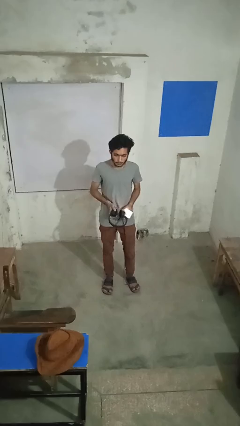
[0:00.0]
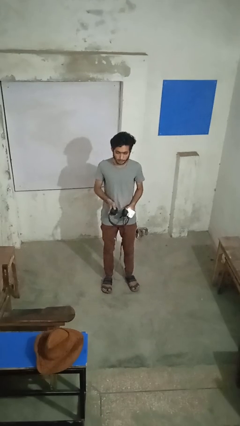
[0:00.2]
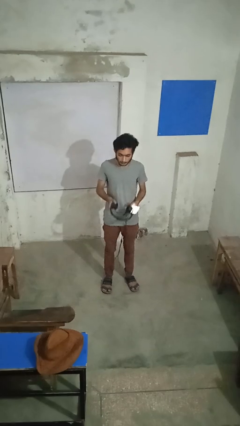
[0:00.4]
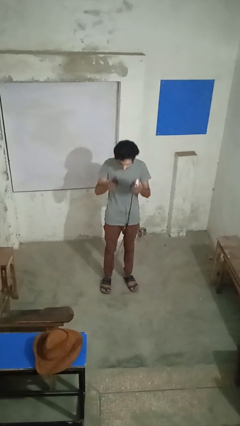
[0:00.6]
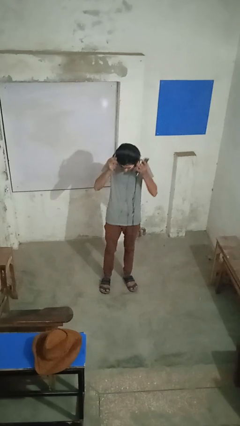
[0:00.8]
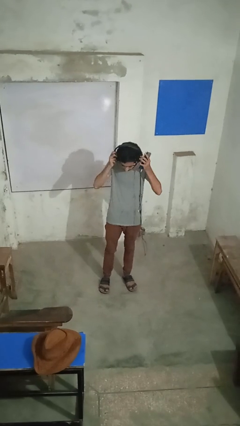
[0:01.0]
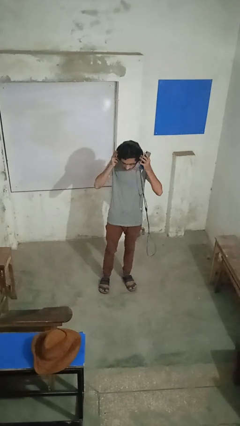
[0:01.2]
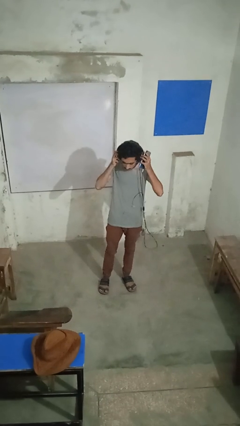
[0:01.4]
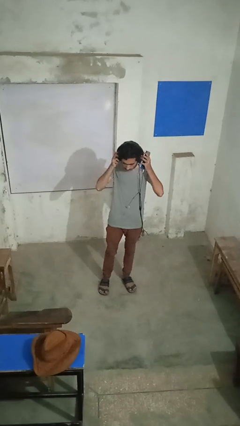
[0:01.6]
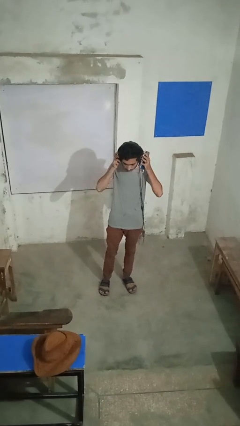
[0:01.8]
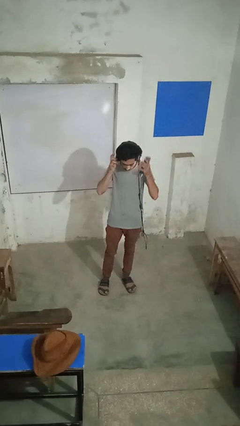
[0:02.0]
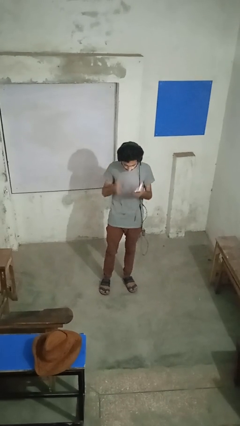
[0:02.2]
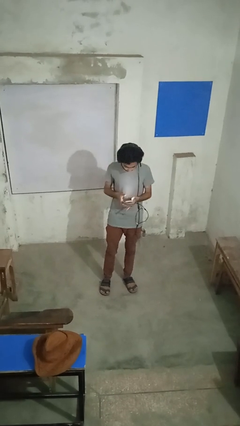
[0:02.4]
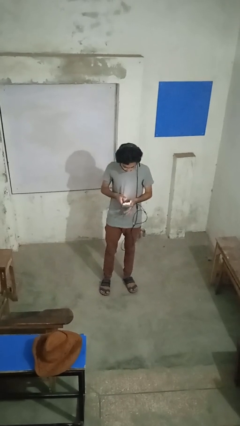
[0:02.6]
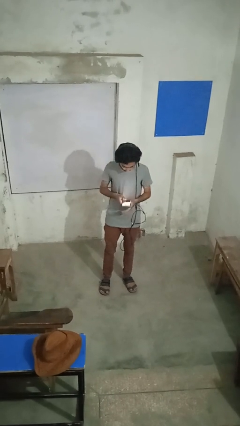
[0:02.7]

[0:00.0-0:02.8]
person puts on headphones

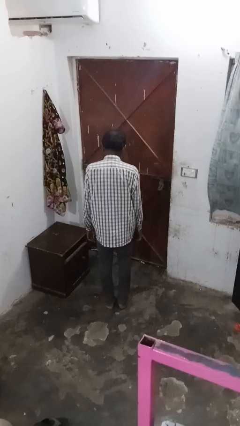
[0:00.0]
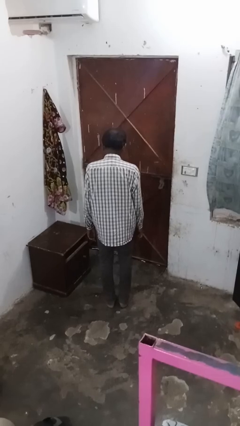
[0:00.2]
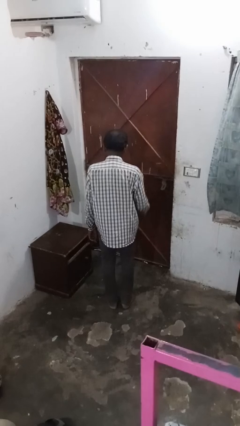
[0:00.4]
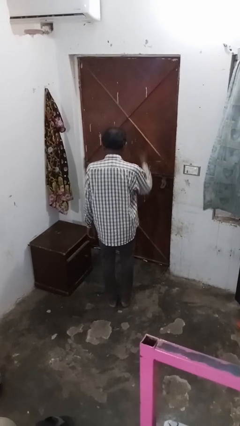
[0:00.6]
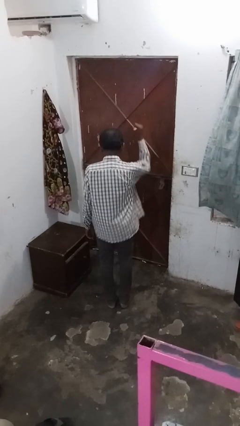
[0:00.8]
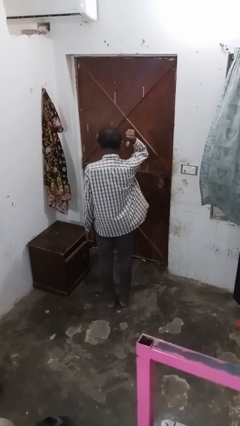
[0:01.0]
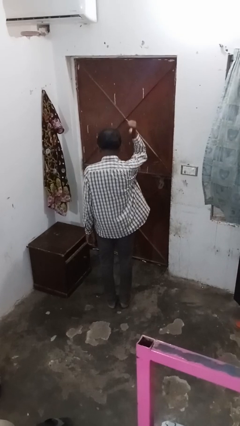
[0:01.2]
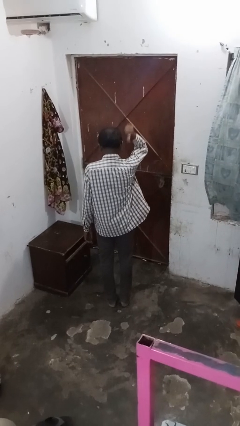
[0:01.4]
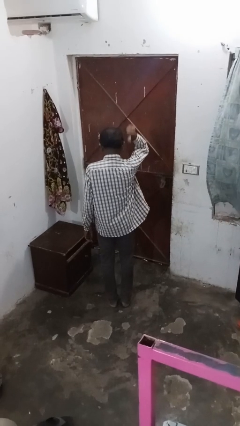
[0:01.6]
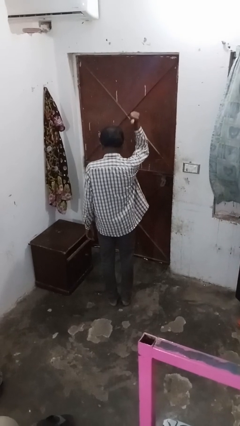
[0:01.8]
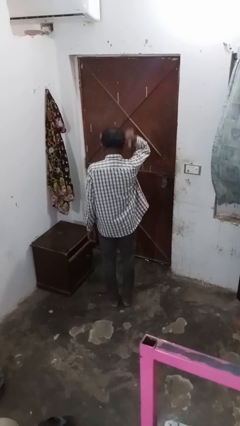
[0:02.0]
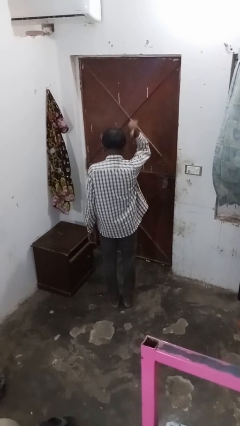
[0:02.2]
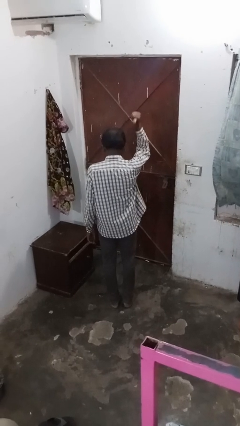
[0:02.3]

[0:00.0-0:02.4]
person gestures behind me

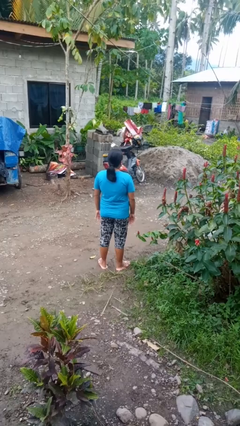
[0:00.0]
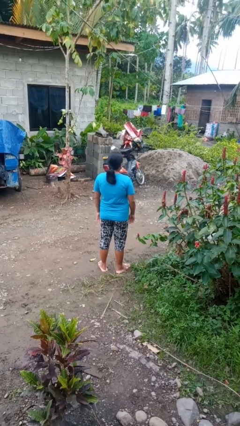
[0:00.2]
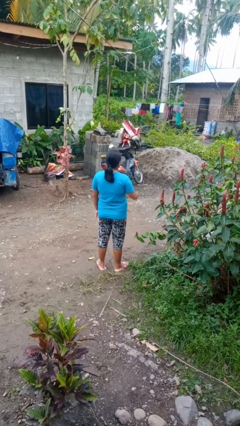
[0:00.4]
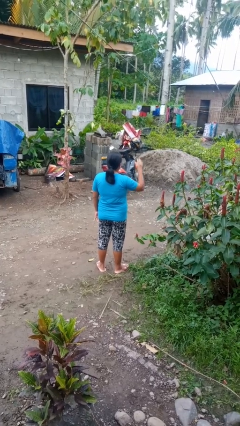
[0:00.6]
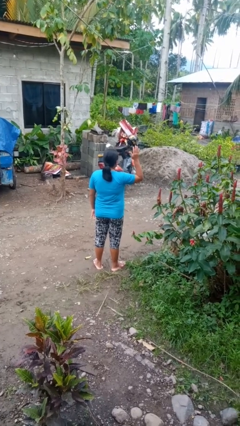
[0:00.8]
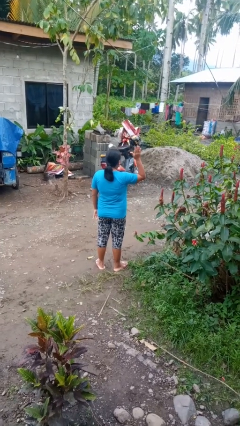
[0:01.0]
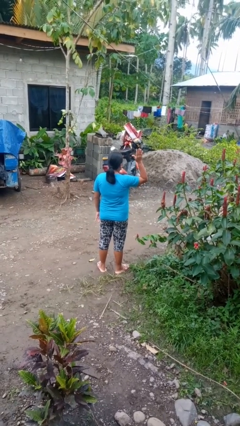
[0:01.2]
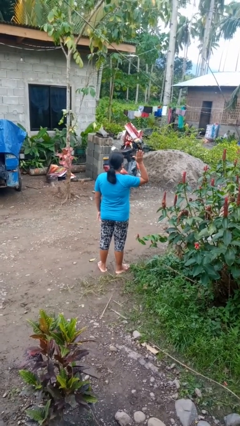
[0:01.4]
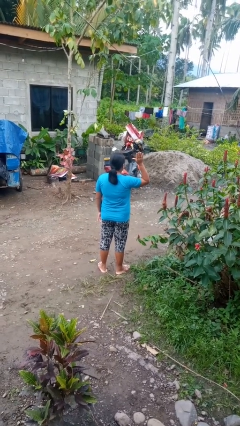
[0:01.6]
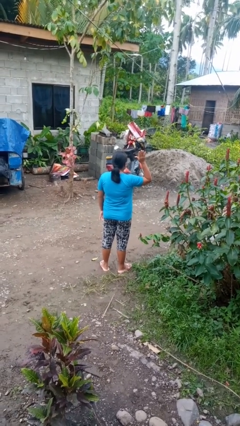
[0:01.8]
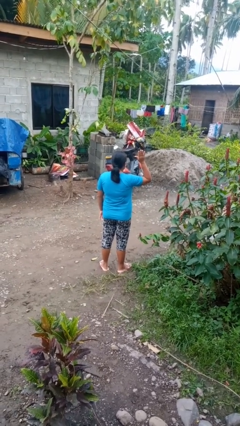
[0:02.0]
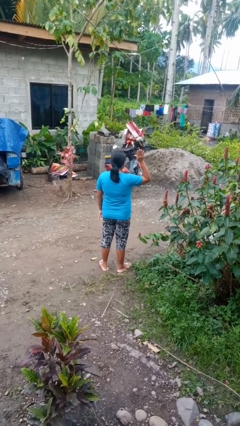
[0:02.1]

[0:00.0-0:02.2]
person gestures raise hand

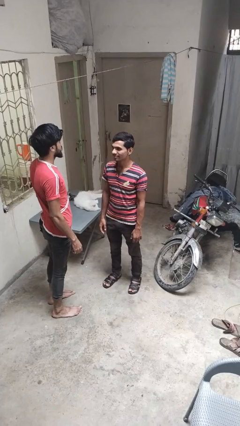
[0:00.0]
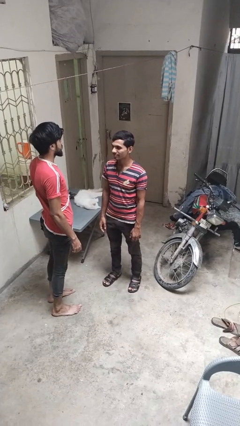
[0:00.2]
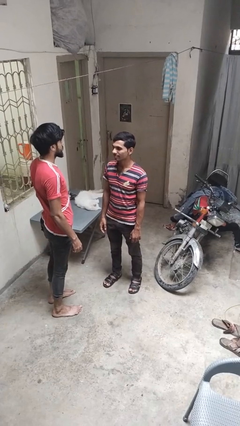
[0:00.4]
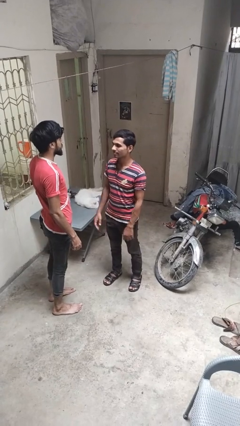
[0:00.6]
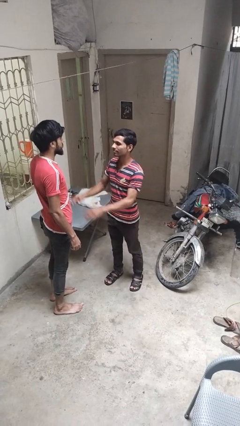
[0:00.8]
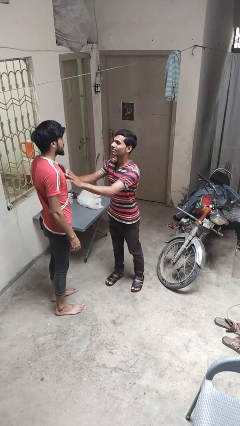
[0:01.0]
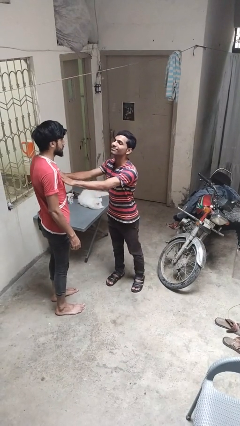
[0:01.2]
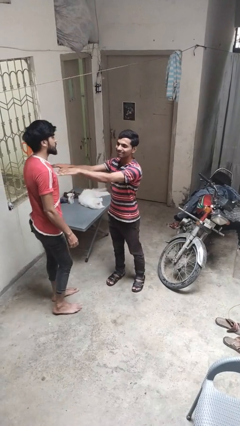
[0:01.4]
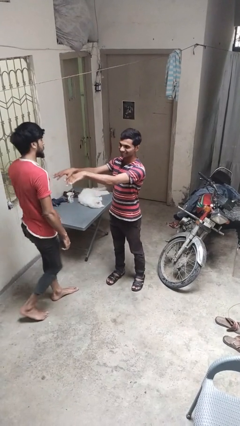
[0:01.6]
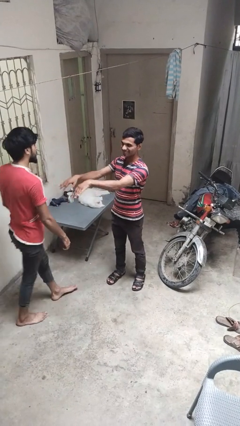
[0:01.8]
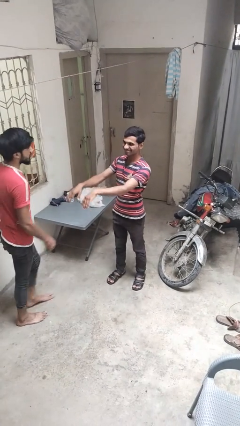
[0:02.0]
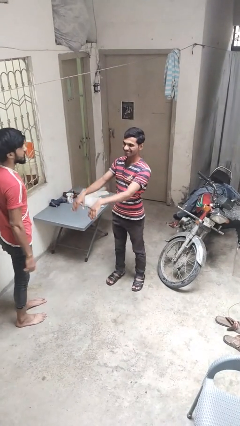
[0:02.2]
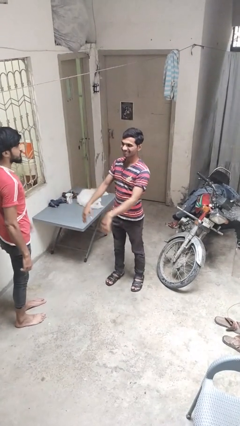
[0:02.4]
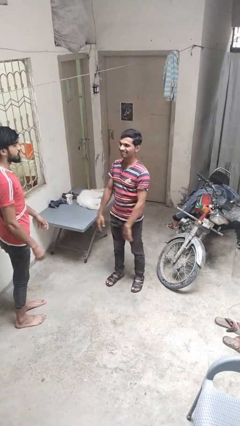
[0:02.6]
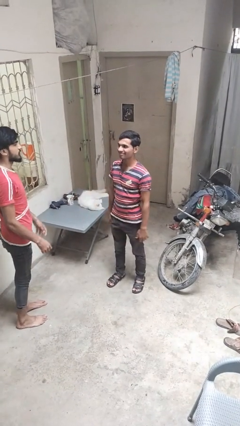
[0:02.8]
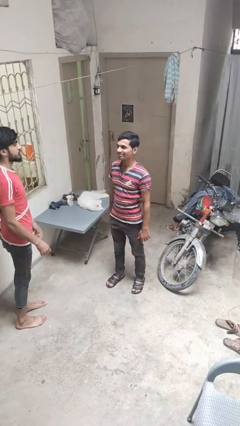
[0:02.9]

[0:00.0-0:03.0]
person shoves person

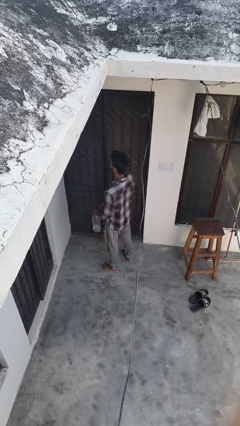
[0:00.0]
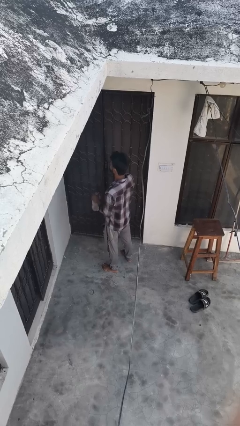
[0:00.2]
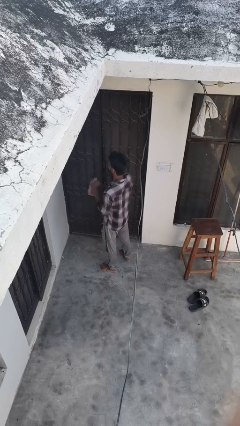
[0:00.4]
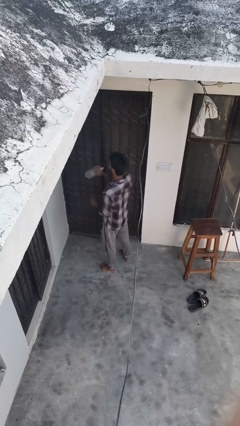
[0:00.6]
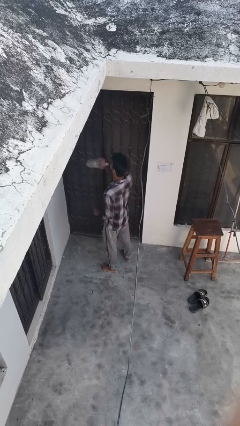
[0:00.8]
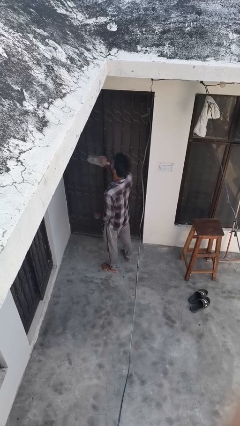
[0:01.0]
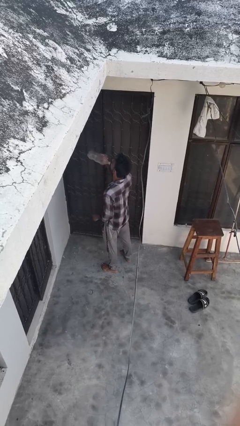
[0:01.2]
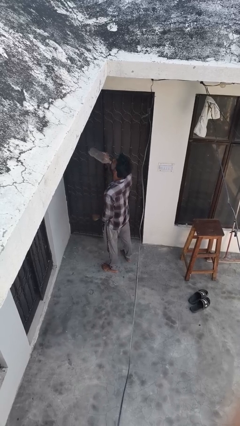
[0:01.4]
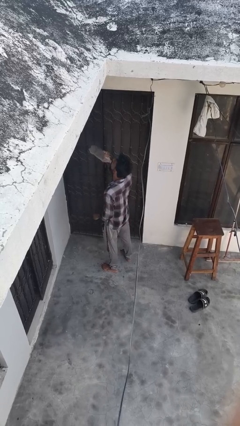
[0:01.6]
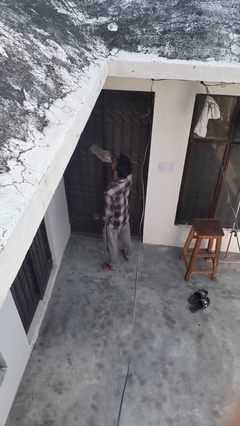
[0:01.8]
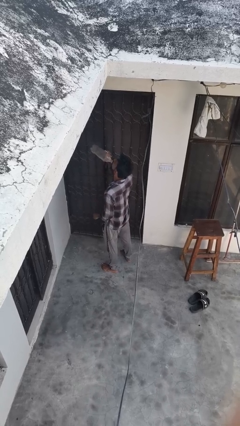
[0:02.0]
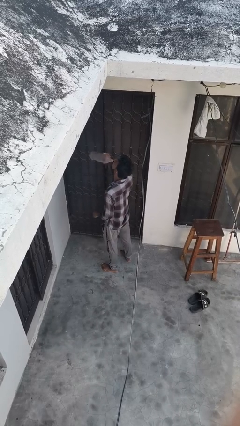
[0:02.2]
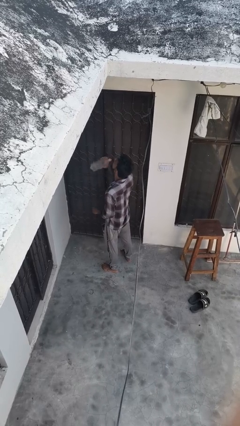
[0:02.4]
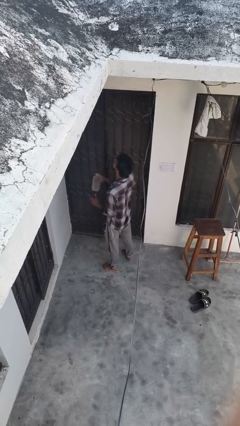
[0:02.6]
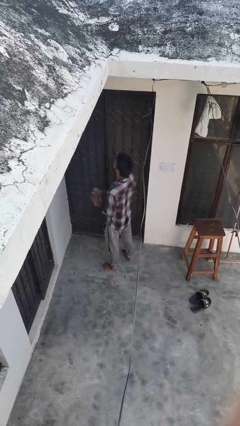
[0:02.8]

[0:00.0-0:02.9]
person drinks from bottle

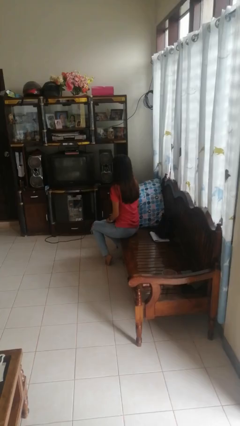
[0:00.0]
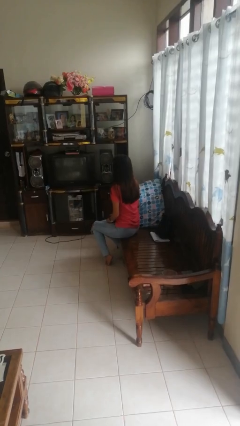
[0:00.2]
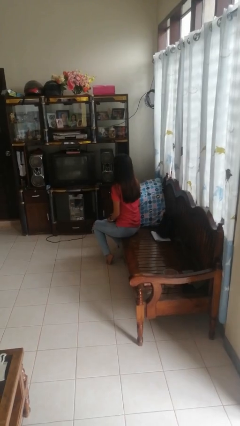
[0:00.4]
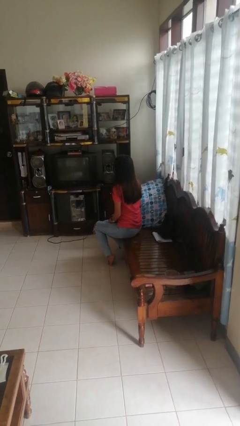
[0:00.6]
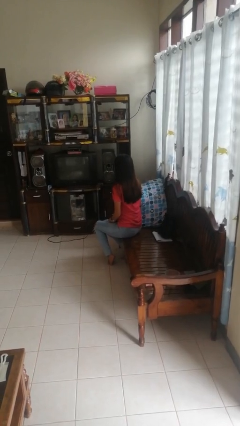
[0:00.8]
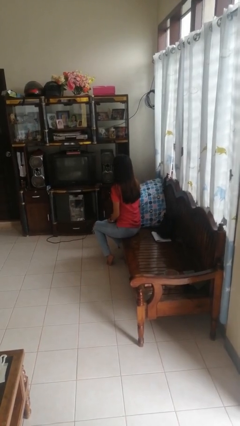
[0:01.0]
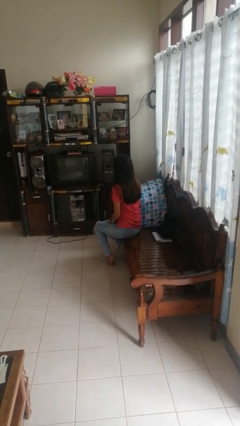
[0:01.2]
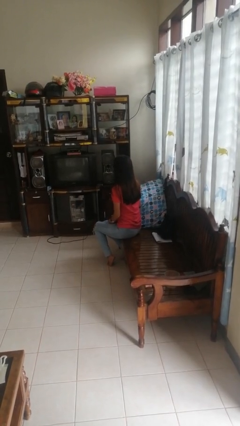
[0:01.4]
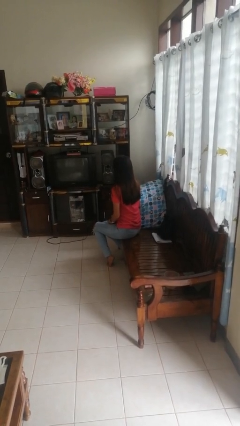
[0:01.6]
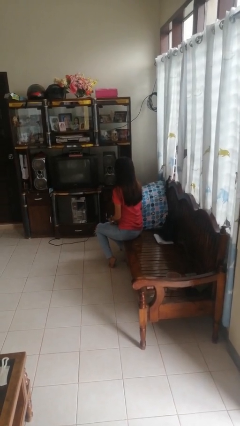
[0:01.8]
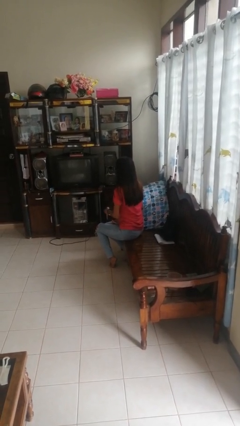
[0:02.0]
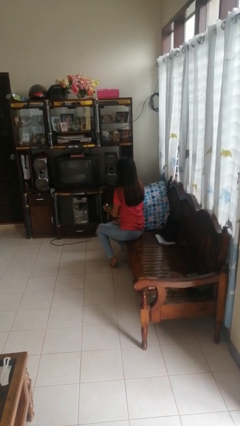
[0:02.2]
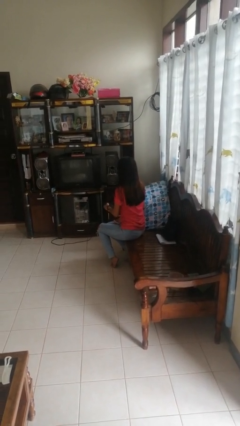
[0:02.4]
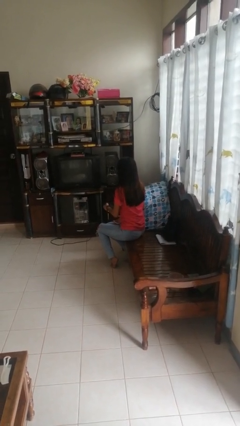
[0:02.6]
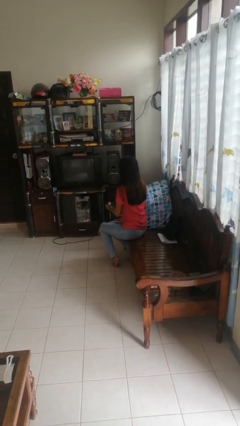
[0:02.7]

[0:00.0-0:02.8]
person uses television remote

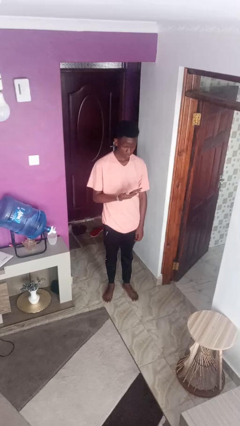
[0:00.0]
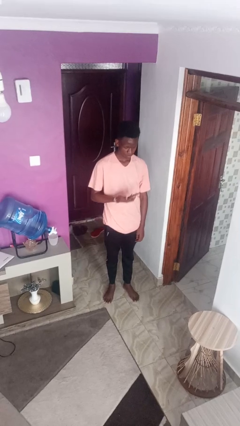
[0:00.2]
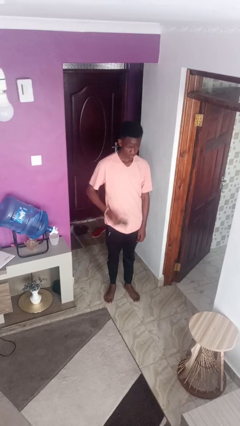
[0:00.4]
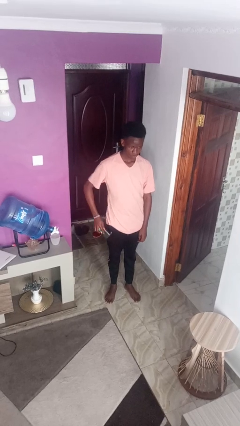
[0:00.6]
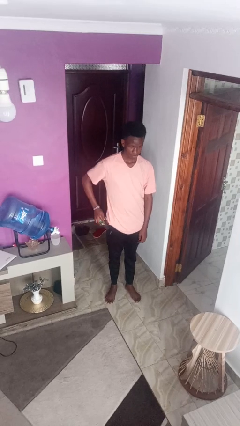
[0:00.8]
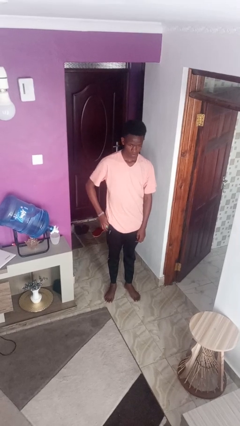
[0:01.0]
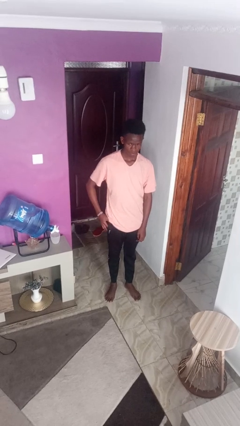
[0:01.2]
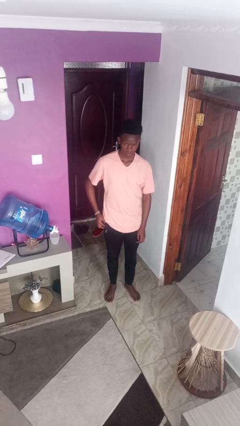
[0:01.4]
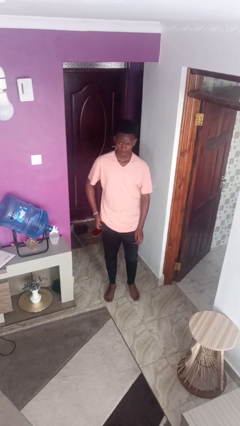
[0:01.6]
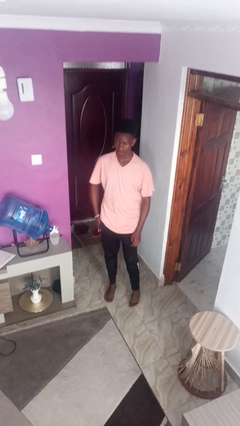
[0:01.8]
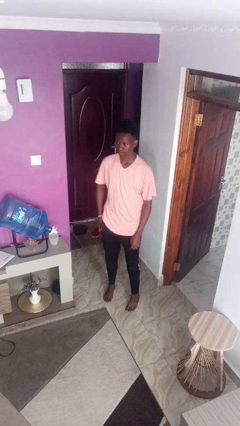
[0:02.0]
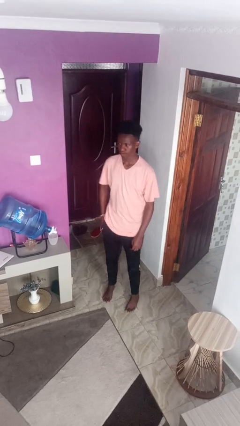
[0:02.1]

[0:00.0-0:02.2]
person puts phone into pocket
